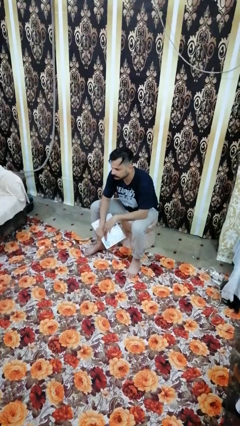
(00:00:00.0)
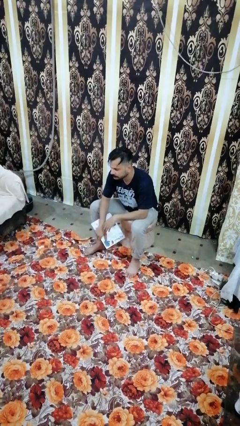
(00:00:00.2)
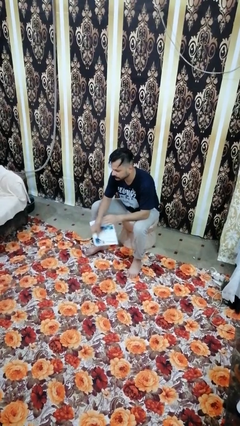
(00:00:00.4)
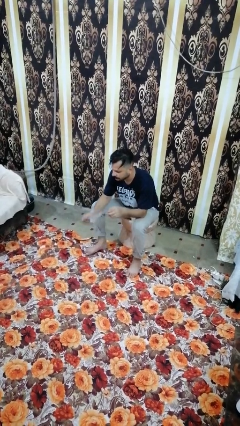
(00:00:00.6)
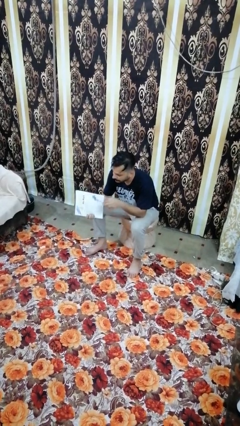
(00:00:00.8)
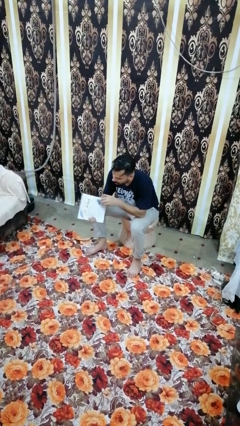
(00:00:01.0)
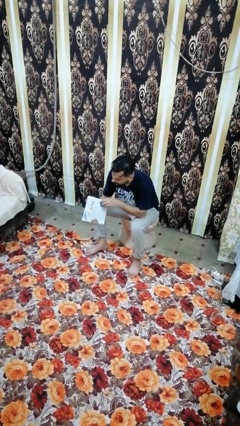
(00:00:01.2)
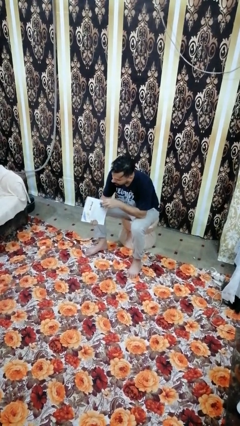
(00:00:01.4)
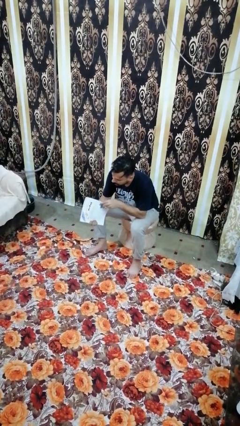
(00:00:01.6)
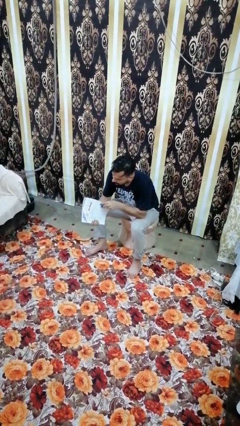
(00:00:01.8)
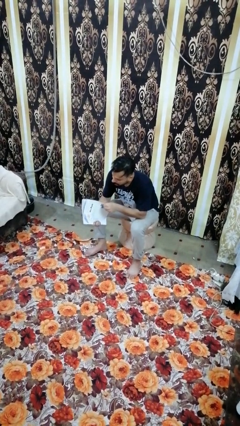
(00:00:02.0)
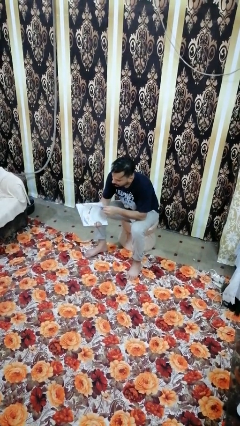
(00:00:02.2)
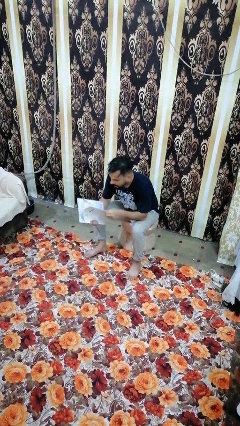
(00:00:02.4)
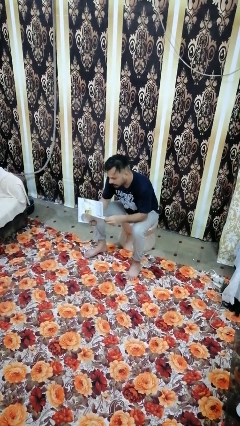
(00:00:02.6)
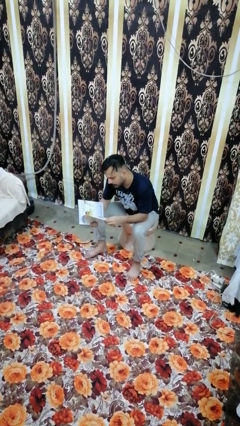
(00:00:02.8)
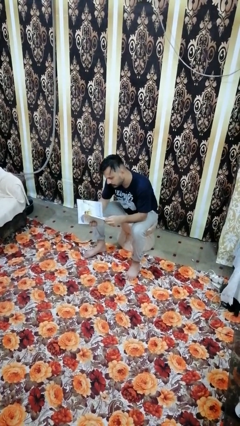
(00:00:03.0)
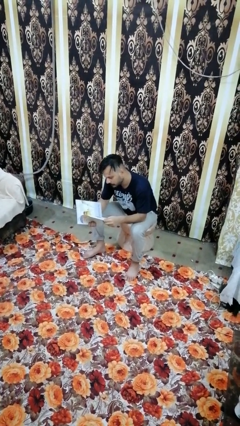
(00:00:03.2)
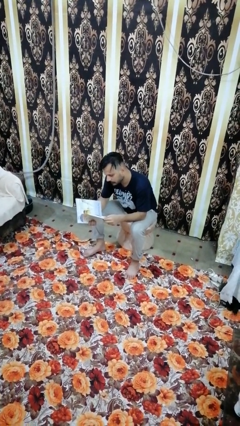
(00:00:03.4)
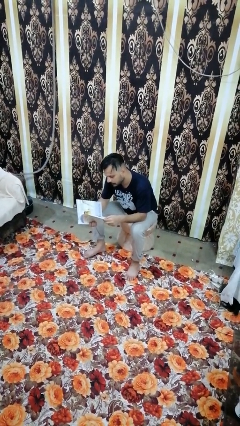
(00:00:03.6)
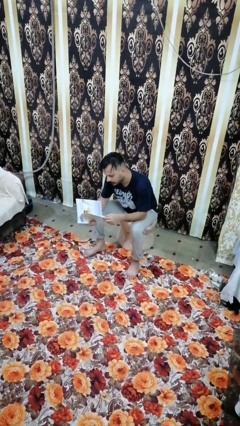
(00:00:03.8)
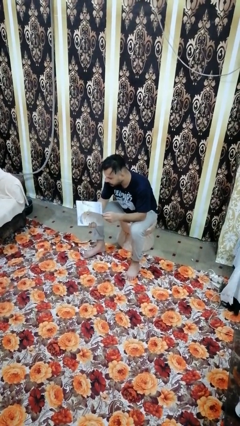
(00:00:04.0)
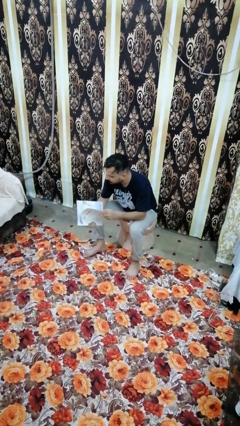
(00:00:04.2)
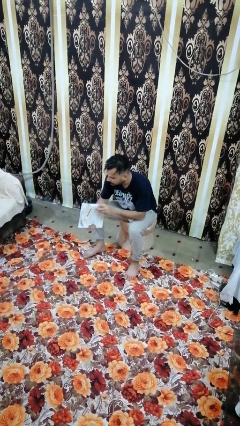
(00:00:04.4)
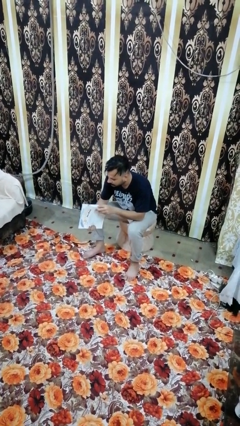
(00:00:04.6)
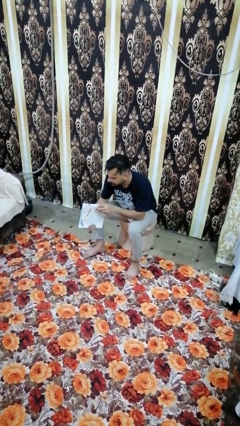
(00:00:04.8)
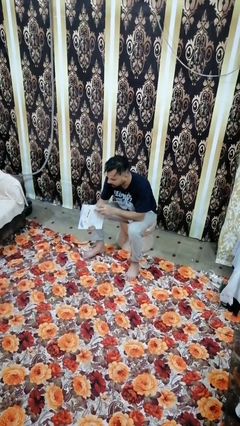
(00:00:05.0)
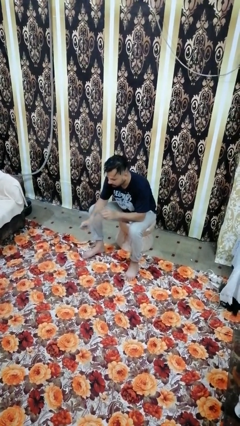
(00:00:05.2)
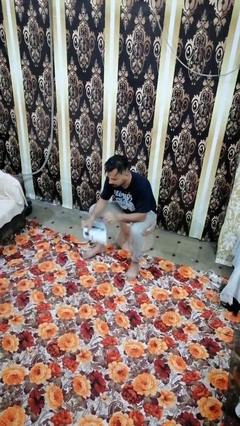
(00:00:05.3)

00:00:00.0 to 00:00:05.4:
person reads magazine

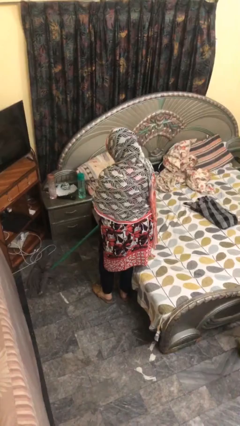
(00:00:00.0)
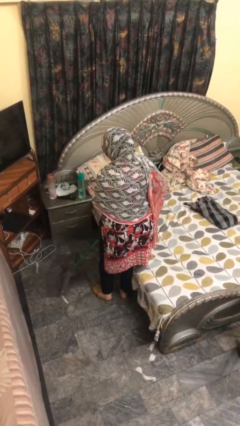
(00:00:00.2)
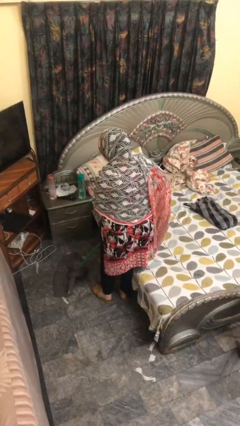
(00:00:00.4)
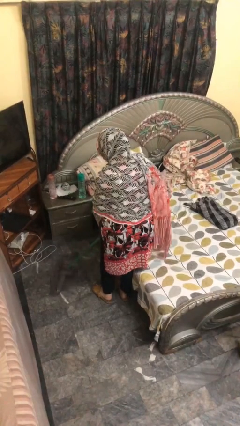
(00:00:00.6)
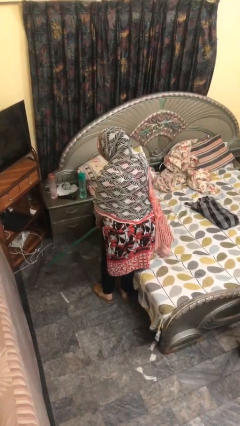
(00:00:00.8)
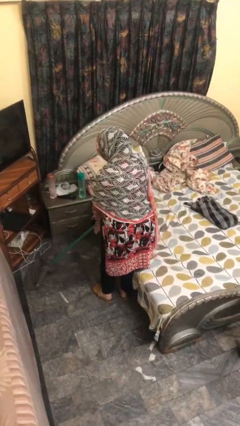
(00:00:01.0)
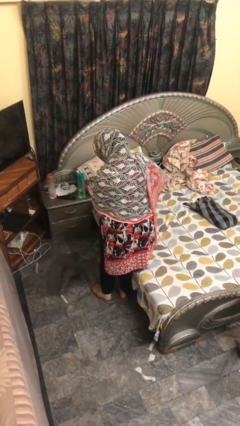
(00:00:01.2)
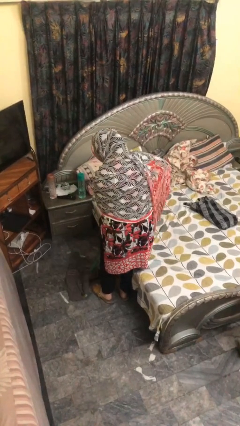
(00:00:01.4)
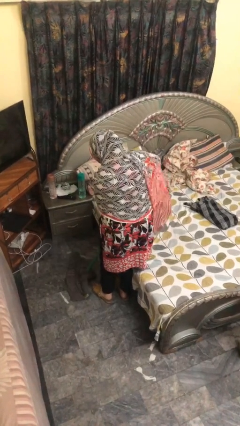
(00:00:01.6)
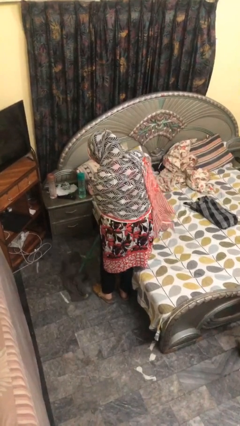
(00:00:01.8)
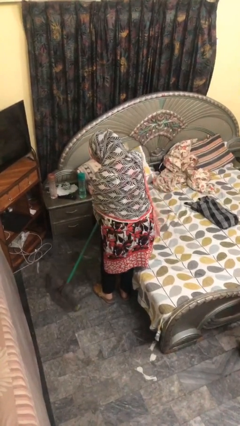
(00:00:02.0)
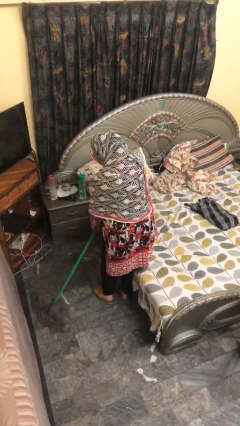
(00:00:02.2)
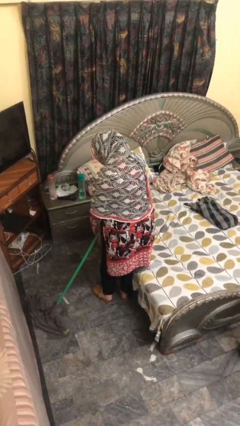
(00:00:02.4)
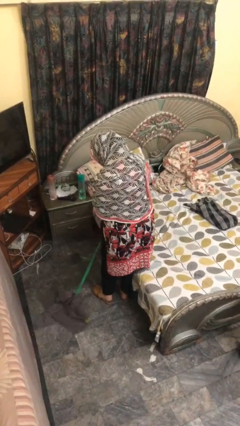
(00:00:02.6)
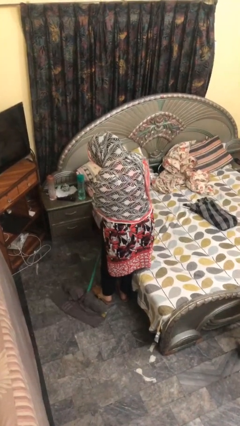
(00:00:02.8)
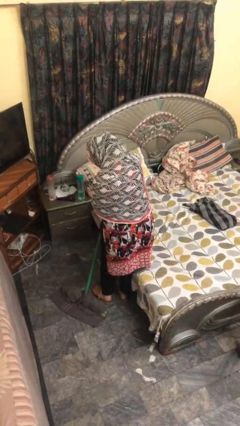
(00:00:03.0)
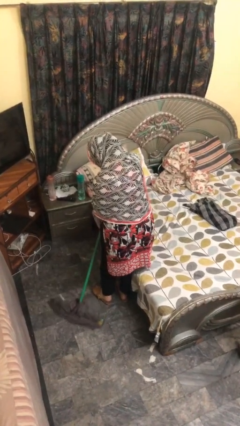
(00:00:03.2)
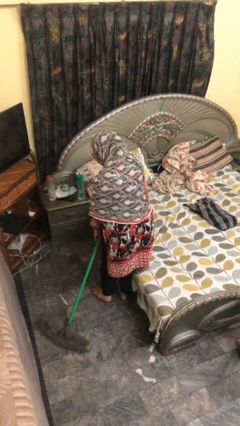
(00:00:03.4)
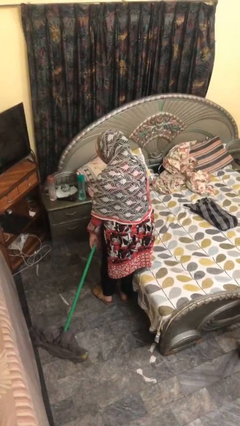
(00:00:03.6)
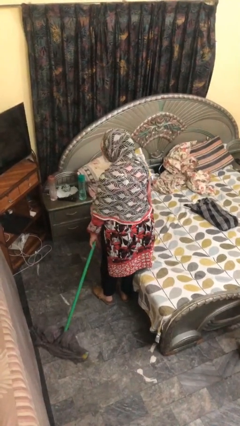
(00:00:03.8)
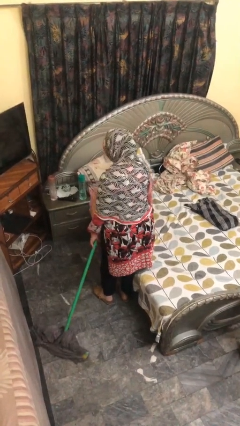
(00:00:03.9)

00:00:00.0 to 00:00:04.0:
person mops

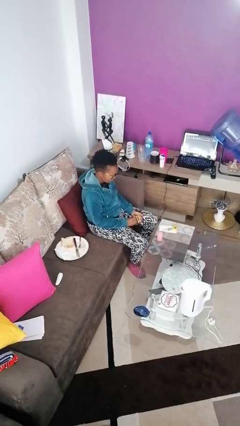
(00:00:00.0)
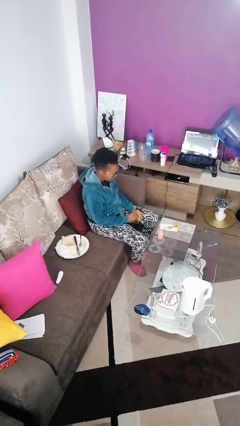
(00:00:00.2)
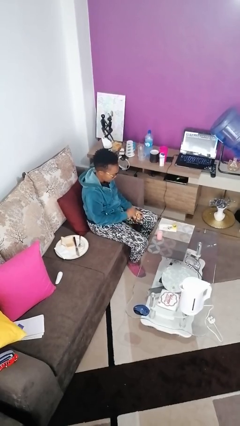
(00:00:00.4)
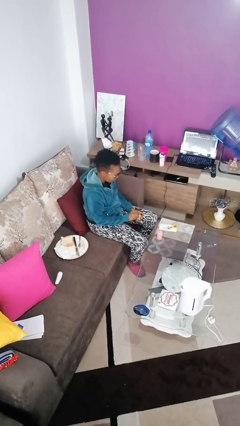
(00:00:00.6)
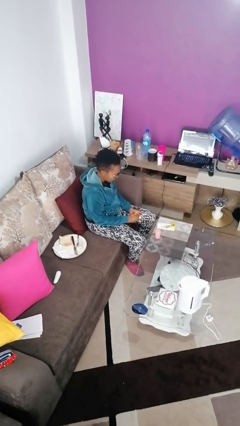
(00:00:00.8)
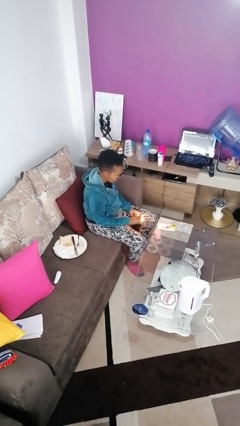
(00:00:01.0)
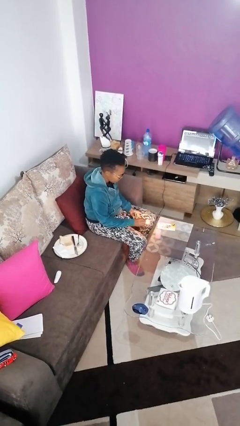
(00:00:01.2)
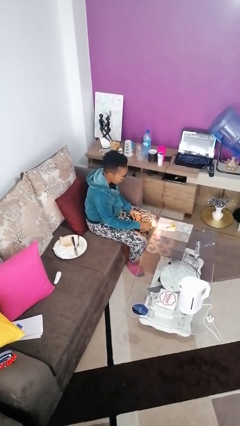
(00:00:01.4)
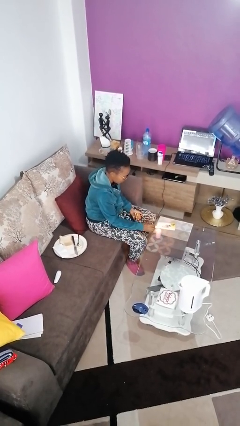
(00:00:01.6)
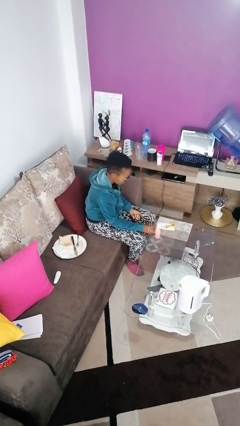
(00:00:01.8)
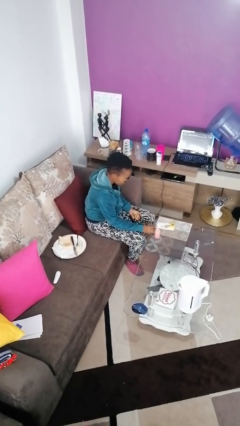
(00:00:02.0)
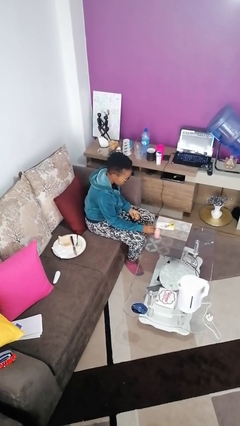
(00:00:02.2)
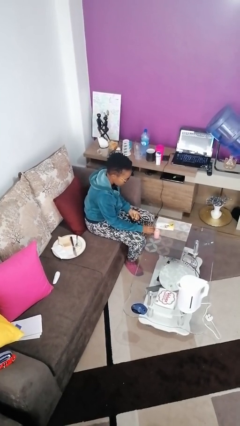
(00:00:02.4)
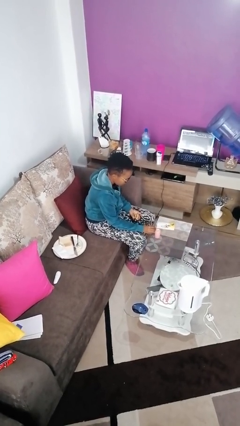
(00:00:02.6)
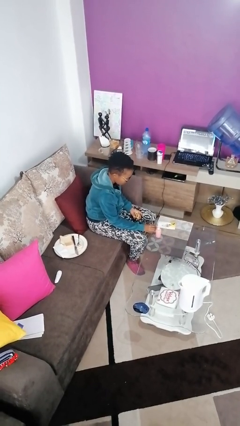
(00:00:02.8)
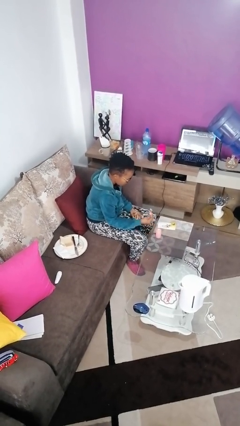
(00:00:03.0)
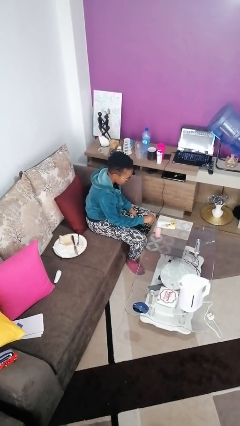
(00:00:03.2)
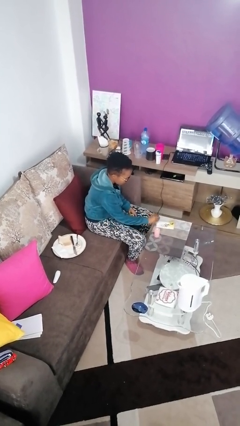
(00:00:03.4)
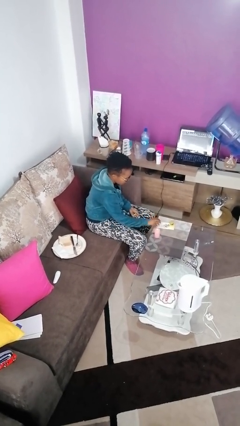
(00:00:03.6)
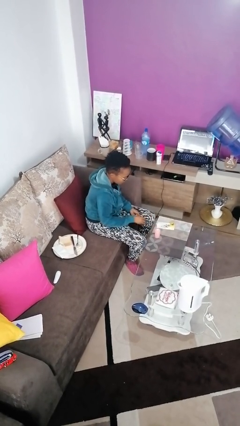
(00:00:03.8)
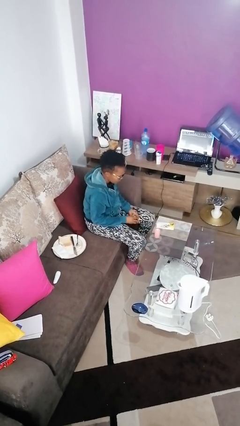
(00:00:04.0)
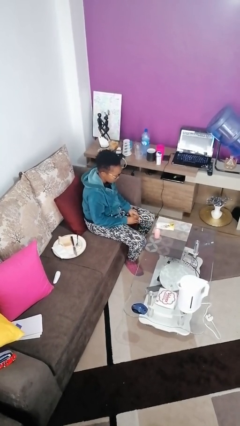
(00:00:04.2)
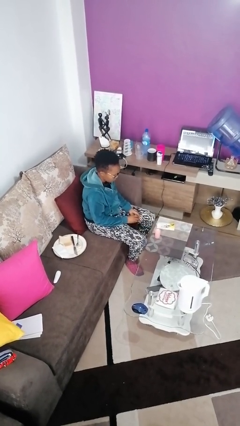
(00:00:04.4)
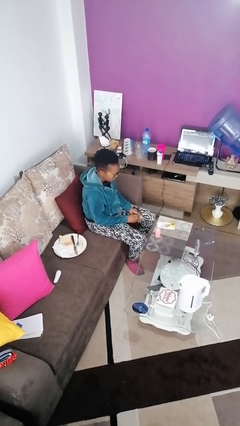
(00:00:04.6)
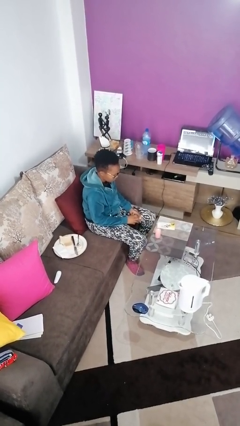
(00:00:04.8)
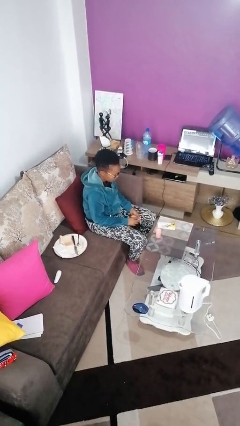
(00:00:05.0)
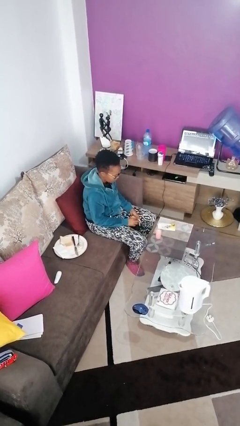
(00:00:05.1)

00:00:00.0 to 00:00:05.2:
person lights candle

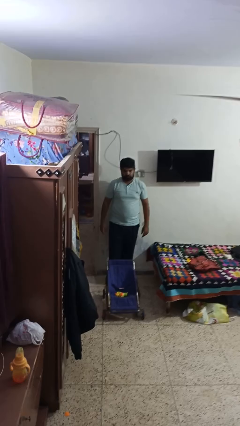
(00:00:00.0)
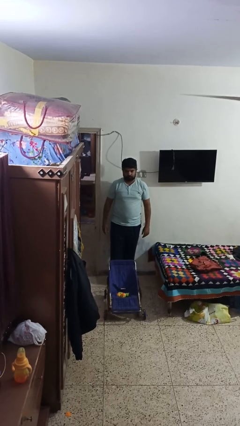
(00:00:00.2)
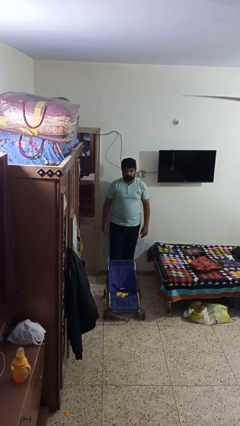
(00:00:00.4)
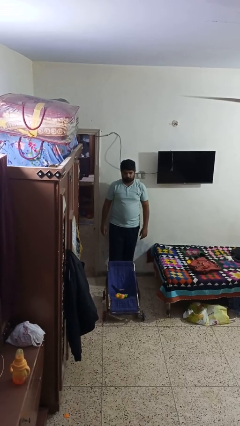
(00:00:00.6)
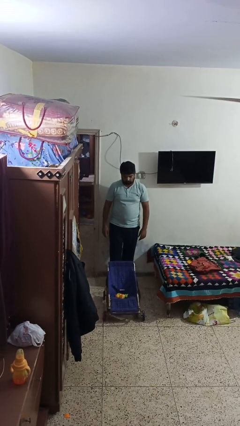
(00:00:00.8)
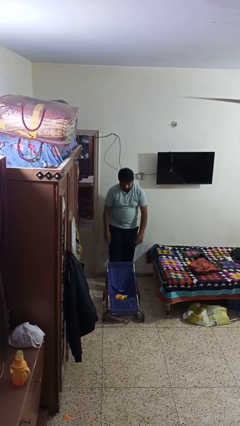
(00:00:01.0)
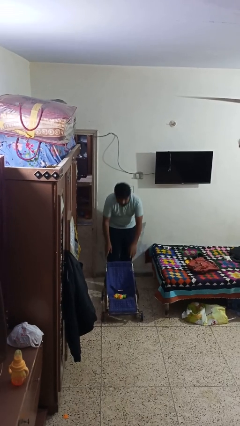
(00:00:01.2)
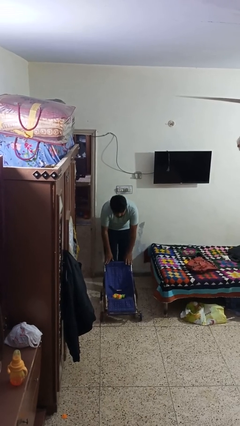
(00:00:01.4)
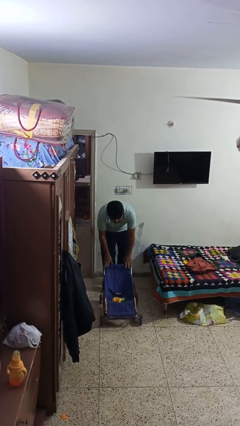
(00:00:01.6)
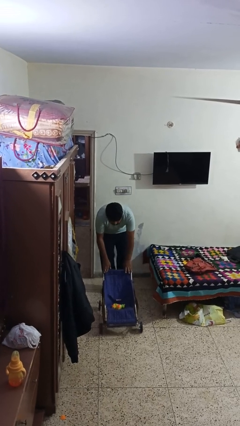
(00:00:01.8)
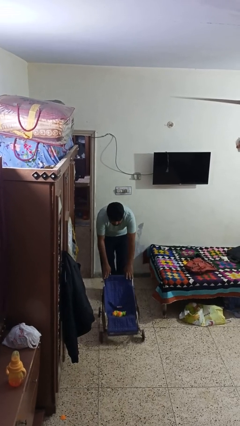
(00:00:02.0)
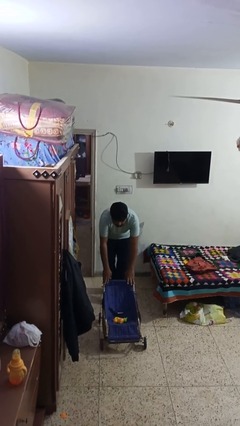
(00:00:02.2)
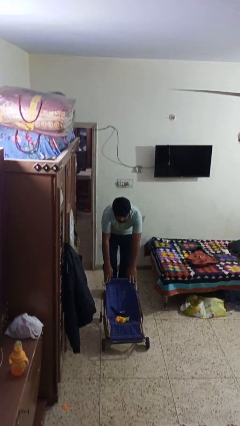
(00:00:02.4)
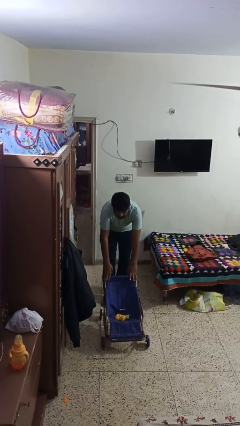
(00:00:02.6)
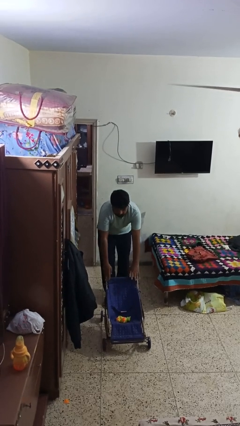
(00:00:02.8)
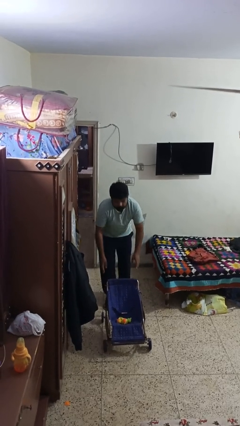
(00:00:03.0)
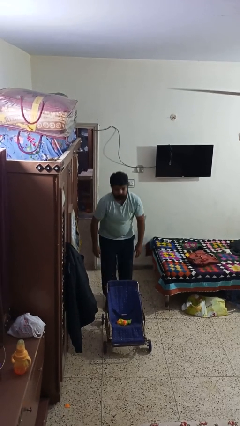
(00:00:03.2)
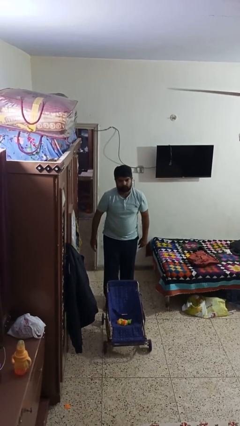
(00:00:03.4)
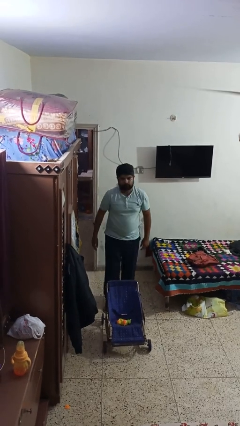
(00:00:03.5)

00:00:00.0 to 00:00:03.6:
person pushes wheeled cart
